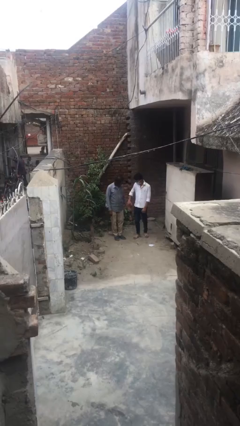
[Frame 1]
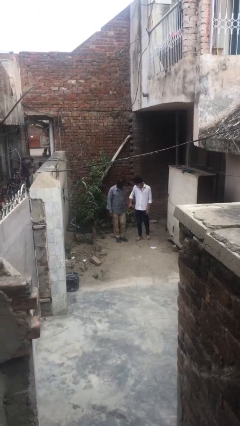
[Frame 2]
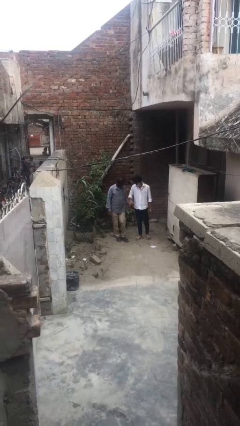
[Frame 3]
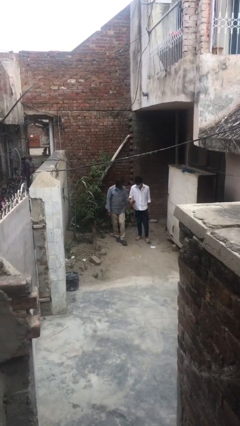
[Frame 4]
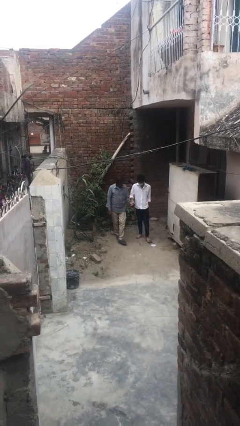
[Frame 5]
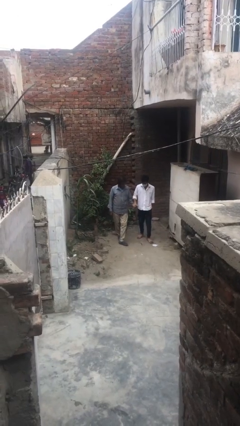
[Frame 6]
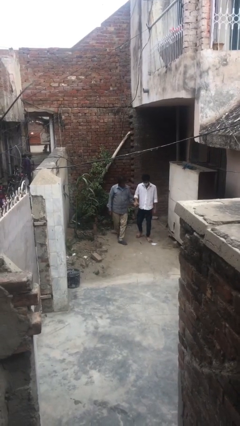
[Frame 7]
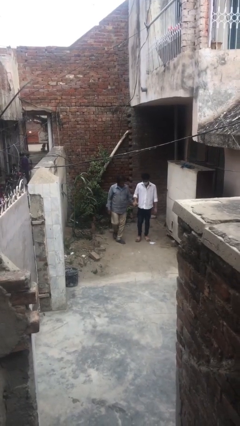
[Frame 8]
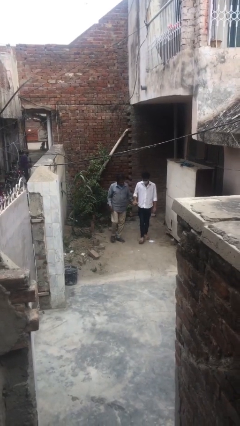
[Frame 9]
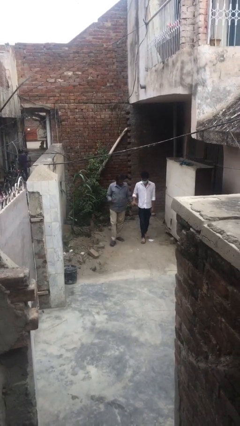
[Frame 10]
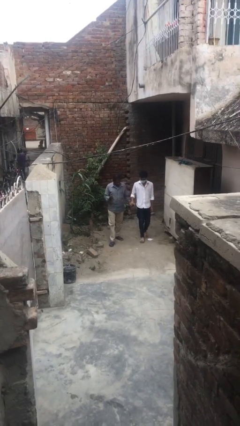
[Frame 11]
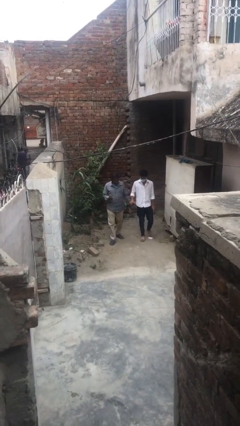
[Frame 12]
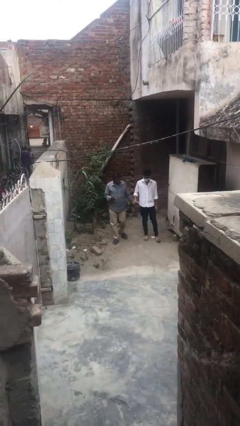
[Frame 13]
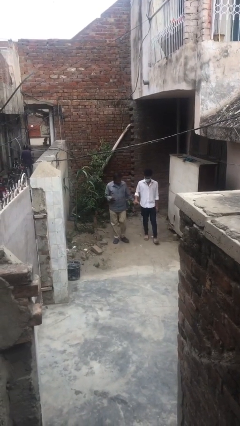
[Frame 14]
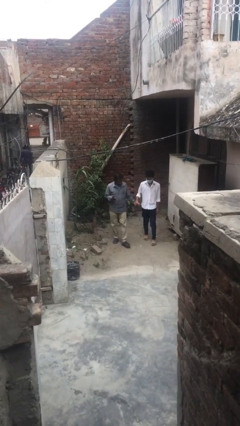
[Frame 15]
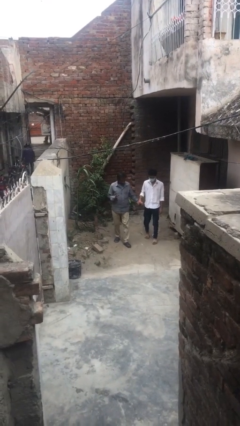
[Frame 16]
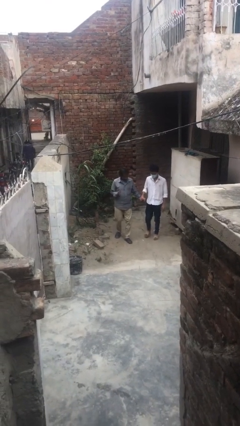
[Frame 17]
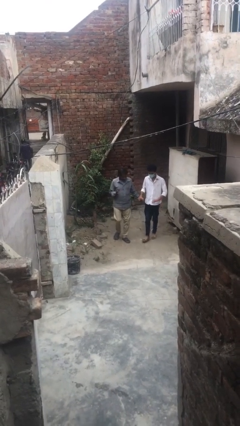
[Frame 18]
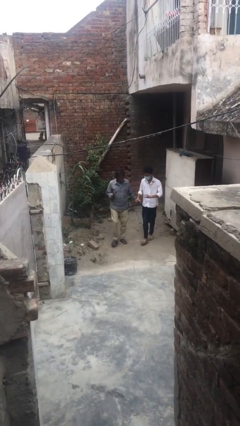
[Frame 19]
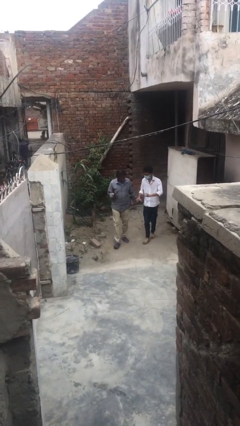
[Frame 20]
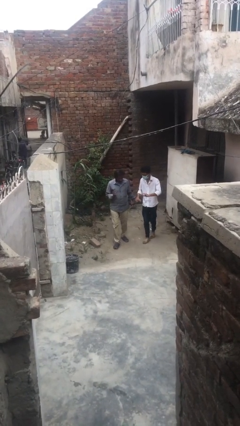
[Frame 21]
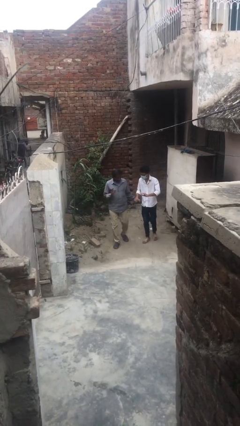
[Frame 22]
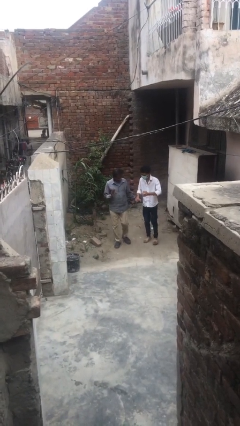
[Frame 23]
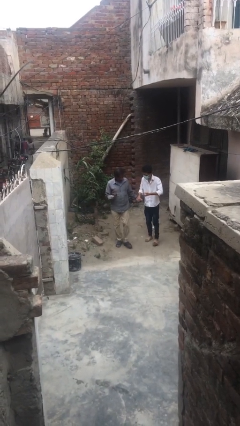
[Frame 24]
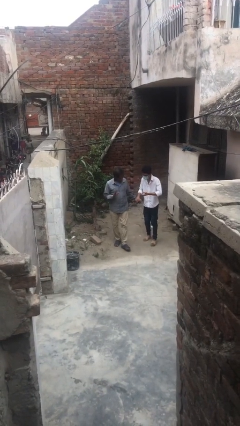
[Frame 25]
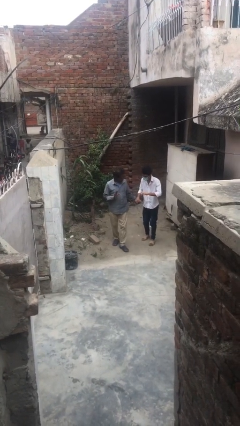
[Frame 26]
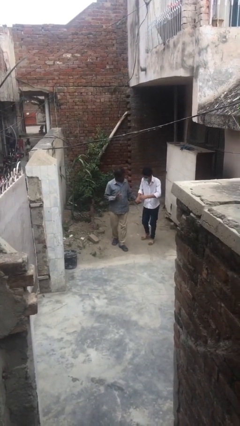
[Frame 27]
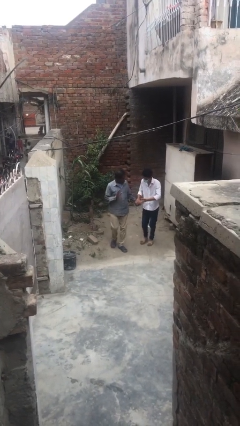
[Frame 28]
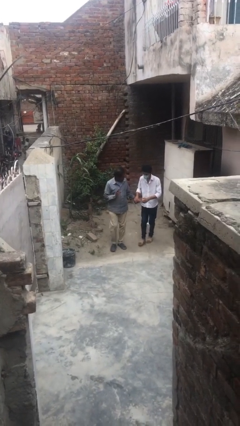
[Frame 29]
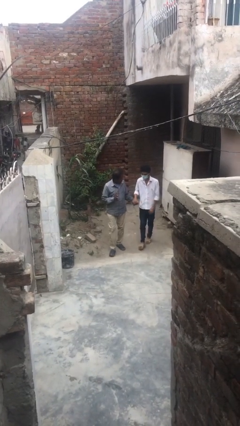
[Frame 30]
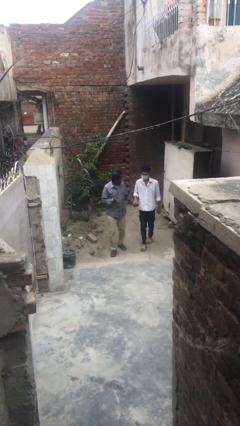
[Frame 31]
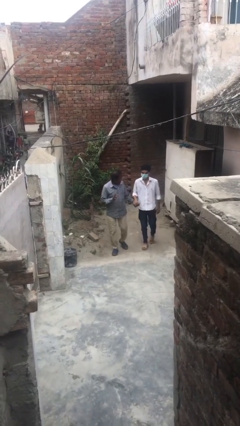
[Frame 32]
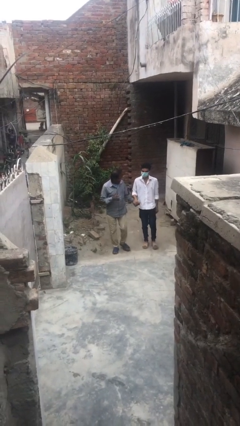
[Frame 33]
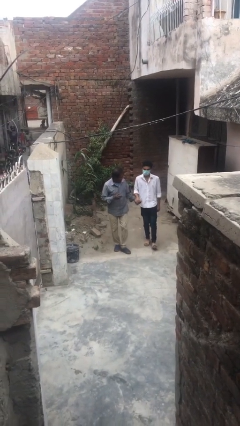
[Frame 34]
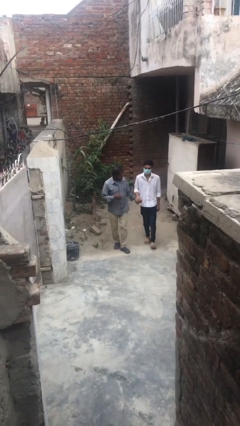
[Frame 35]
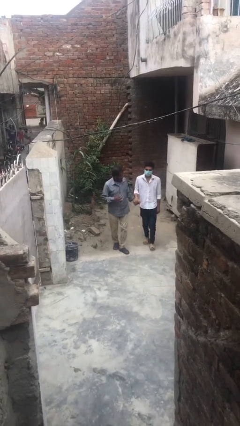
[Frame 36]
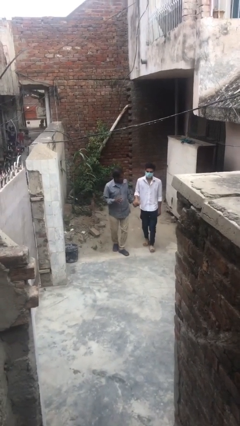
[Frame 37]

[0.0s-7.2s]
person holds hand

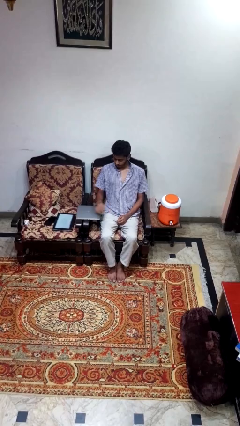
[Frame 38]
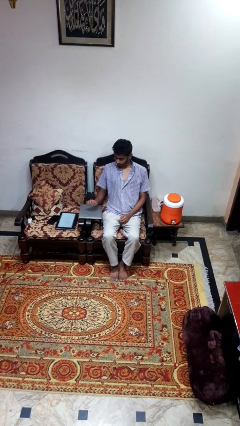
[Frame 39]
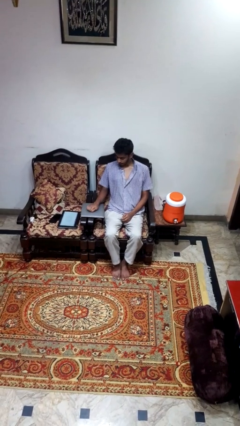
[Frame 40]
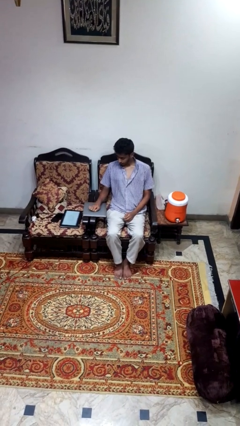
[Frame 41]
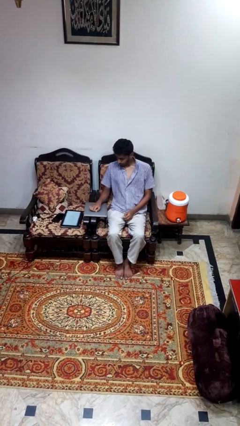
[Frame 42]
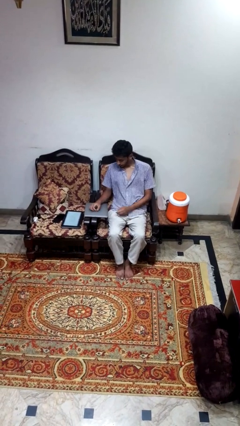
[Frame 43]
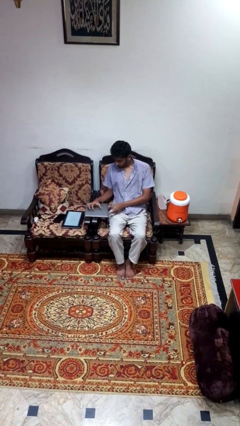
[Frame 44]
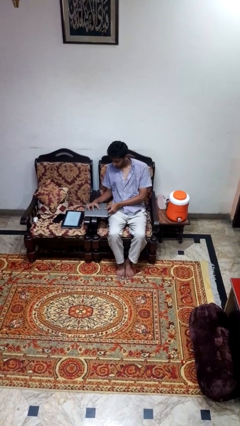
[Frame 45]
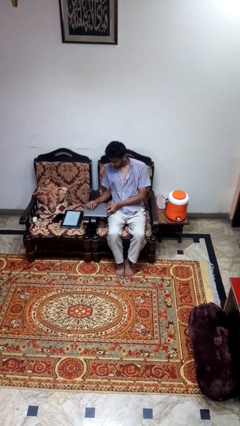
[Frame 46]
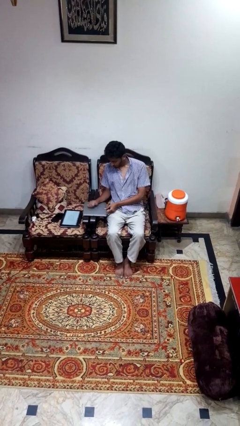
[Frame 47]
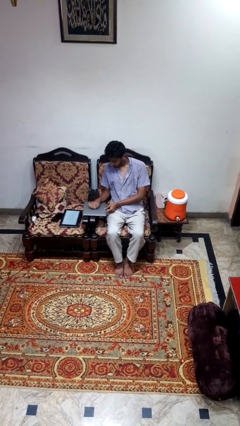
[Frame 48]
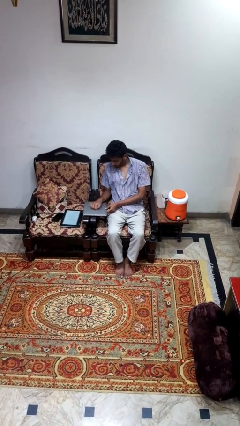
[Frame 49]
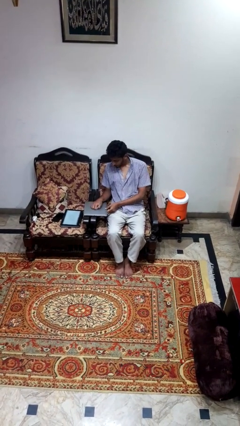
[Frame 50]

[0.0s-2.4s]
person taps object with finger

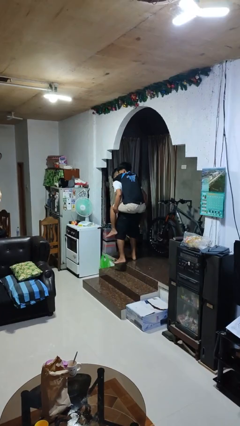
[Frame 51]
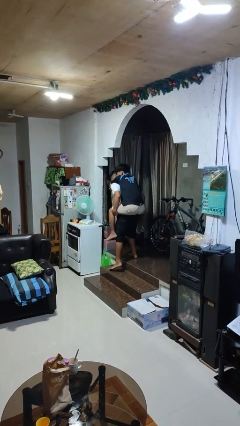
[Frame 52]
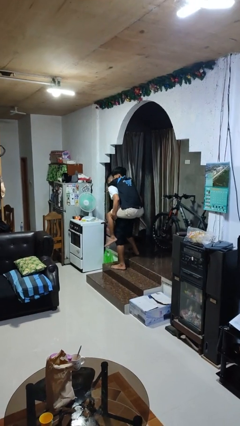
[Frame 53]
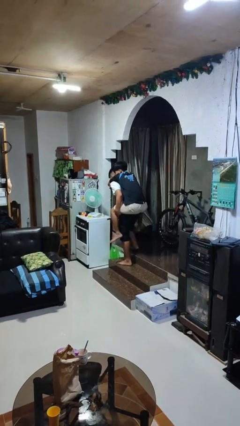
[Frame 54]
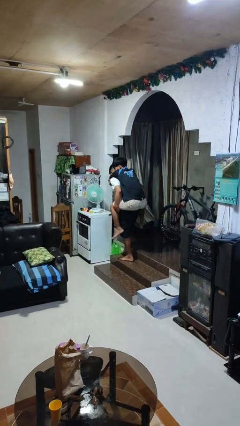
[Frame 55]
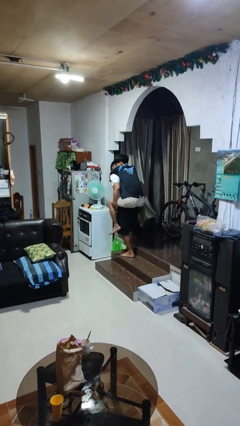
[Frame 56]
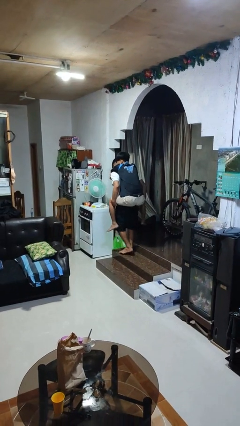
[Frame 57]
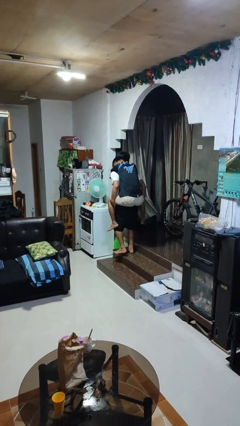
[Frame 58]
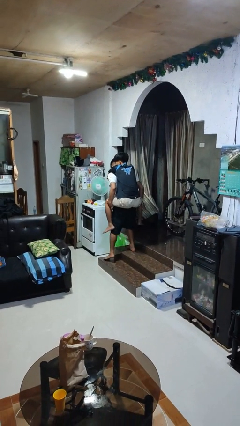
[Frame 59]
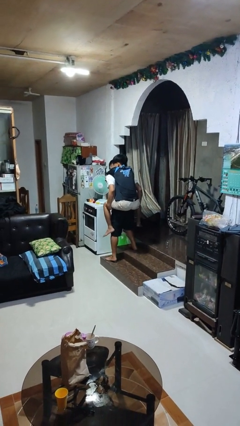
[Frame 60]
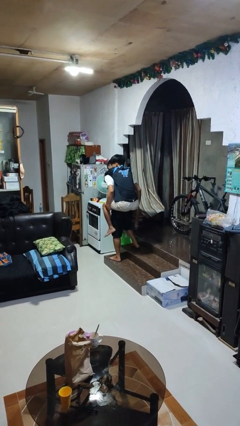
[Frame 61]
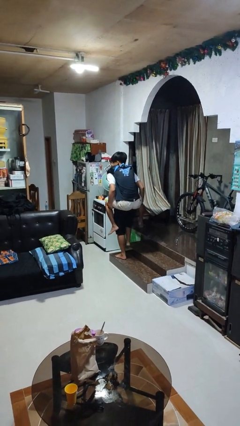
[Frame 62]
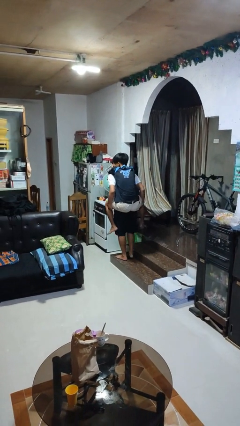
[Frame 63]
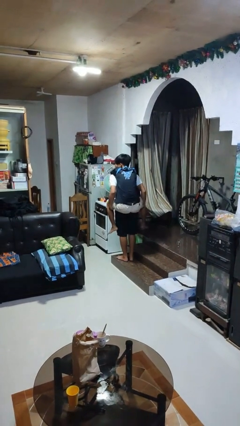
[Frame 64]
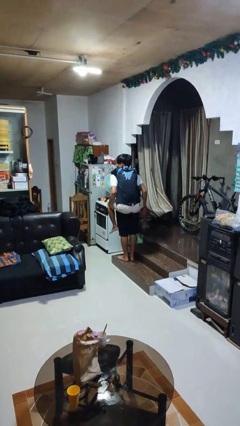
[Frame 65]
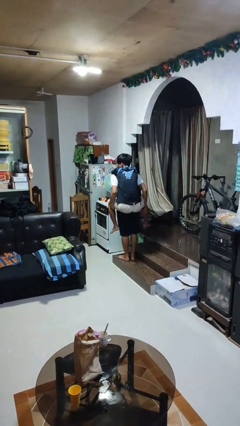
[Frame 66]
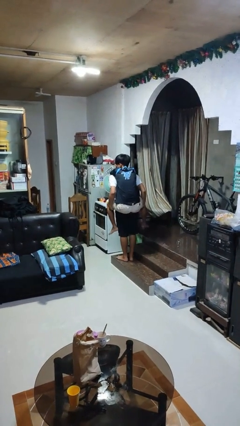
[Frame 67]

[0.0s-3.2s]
person carries person on back

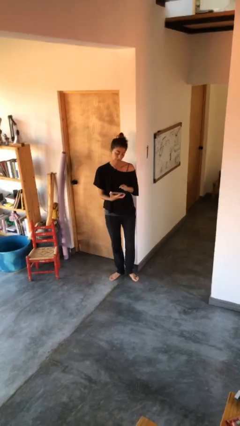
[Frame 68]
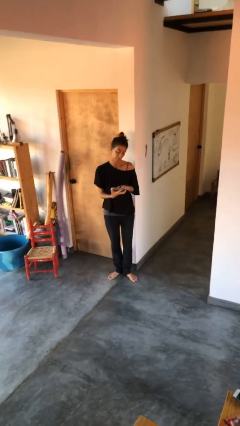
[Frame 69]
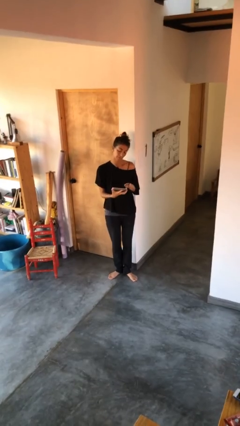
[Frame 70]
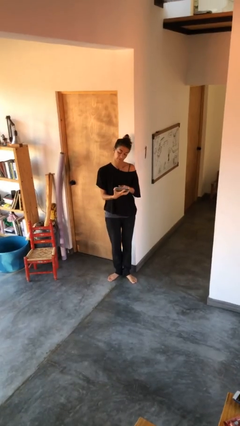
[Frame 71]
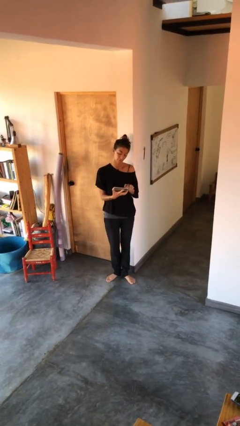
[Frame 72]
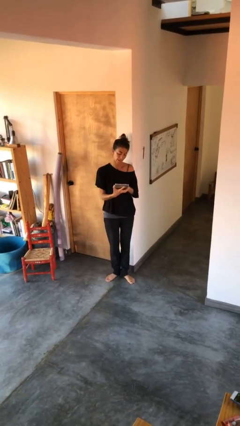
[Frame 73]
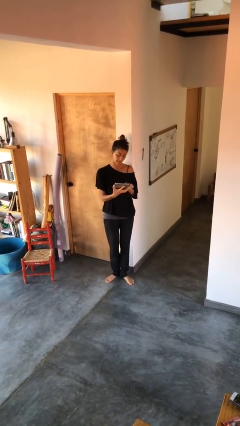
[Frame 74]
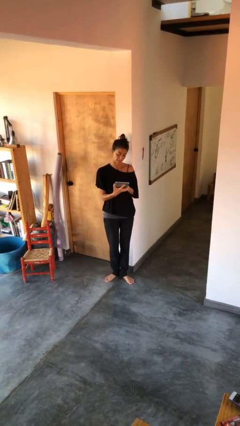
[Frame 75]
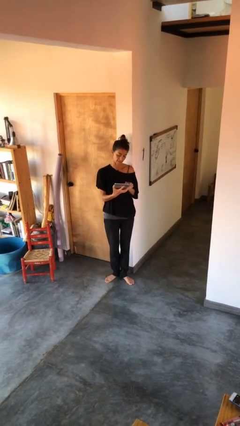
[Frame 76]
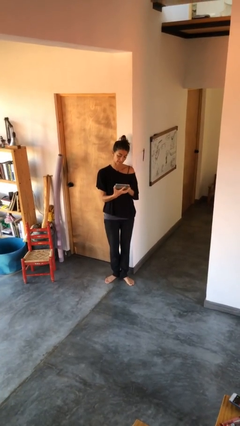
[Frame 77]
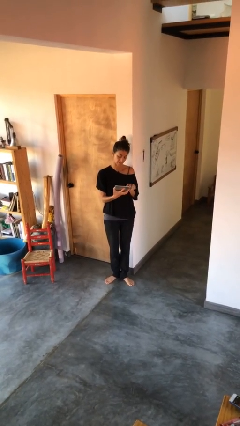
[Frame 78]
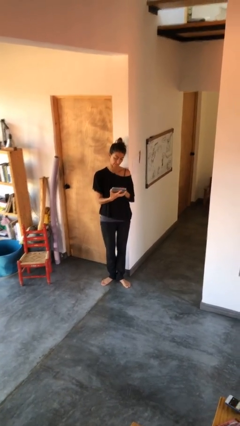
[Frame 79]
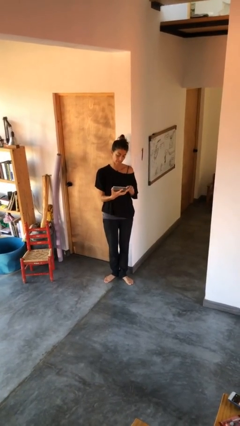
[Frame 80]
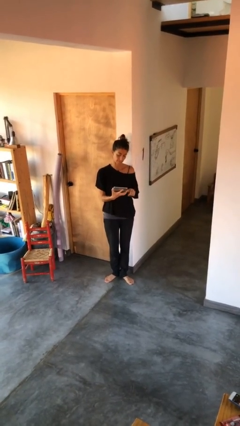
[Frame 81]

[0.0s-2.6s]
person interacts with tablet

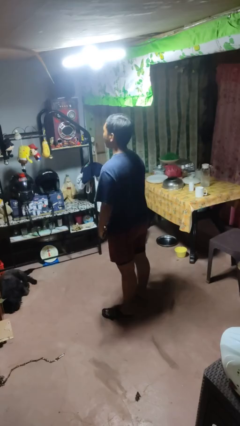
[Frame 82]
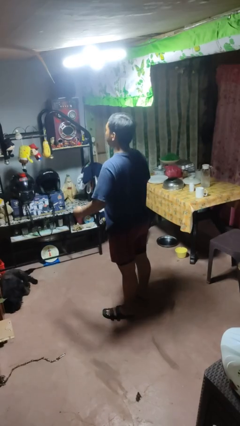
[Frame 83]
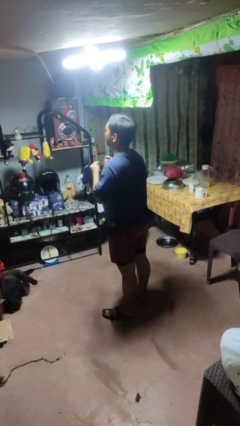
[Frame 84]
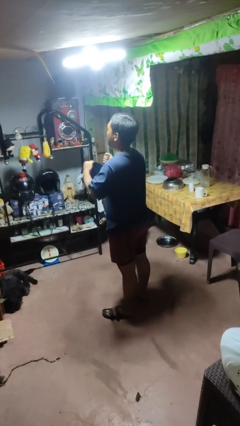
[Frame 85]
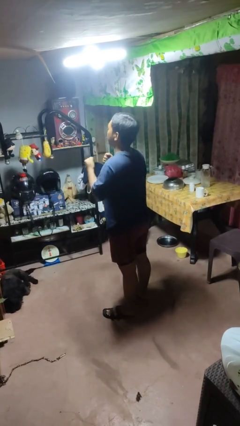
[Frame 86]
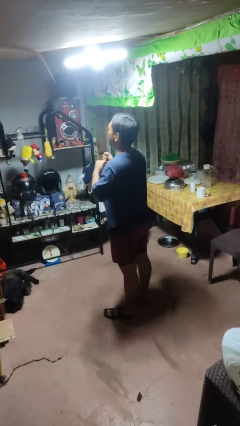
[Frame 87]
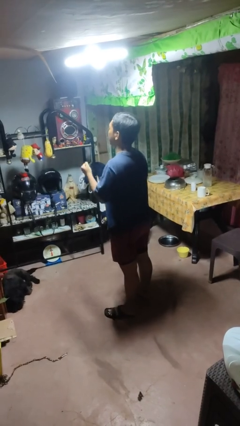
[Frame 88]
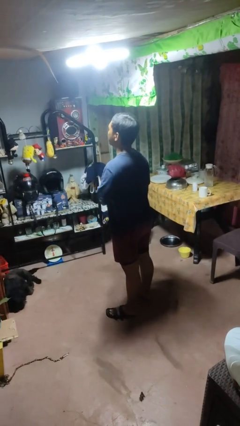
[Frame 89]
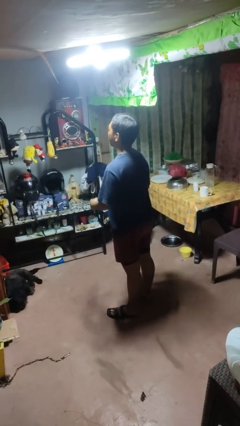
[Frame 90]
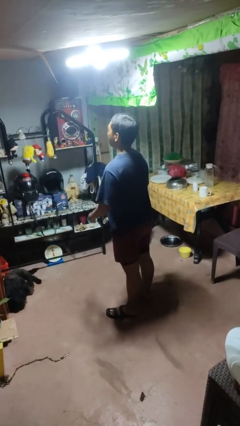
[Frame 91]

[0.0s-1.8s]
person drums on chest
